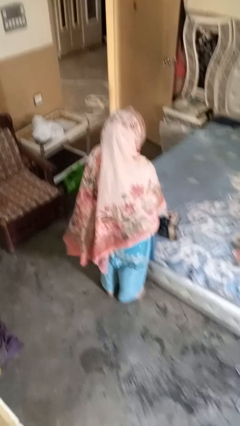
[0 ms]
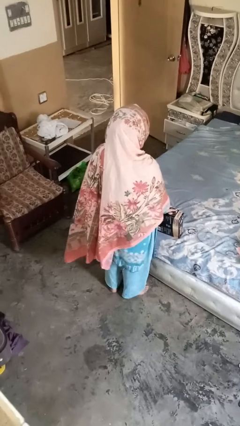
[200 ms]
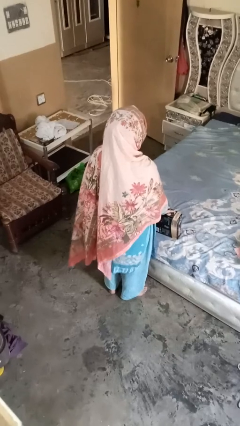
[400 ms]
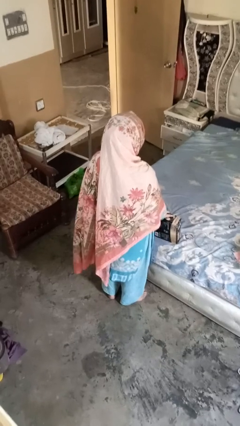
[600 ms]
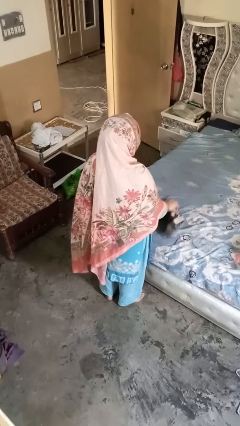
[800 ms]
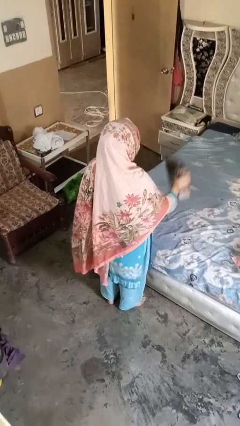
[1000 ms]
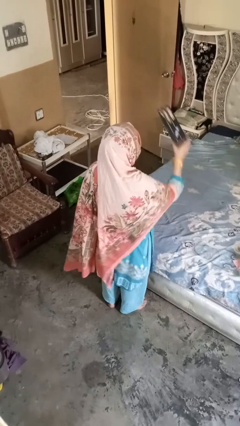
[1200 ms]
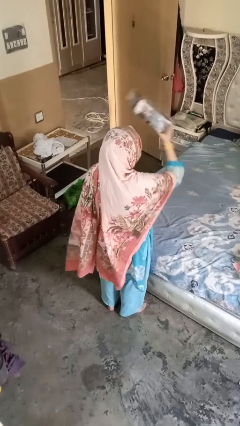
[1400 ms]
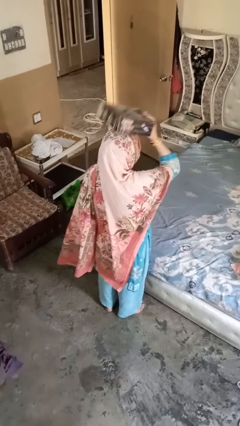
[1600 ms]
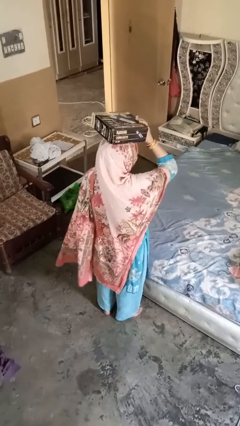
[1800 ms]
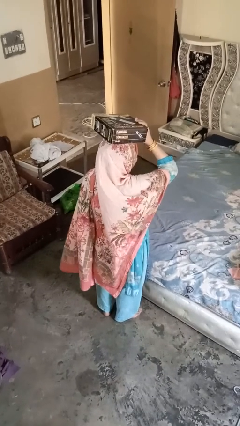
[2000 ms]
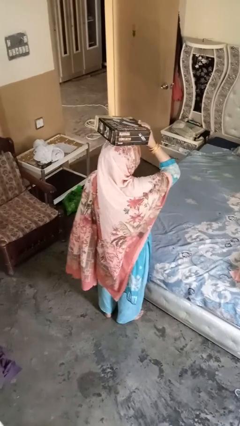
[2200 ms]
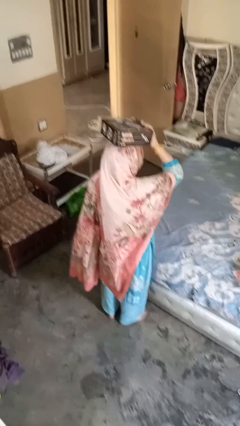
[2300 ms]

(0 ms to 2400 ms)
person holds object above head

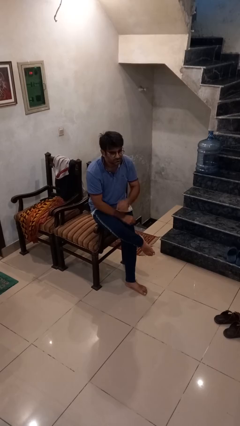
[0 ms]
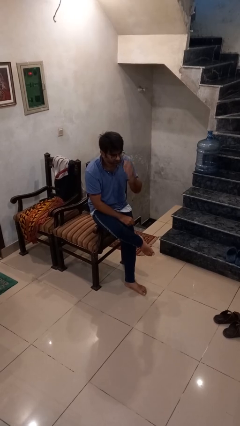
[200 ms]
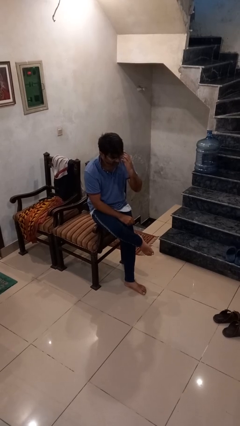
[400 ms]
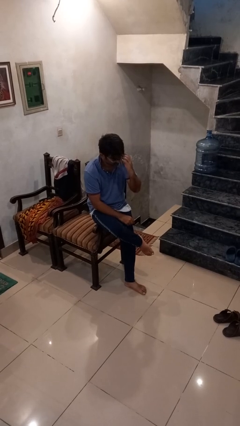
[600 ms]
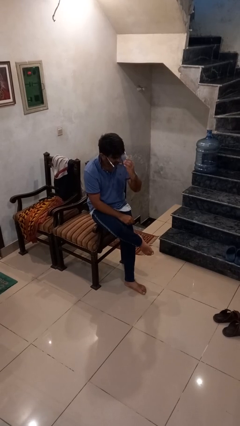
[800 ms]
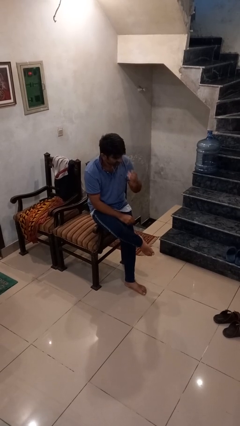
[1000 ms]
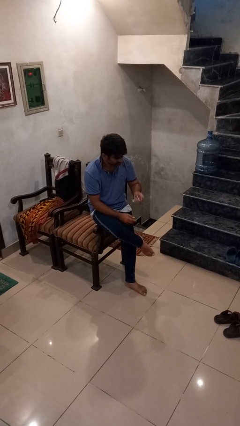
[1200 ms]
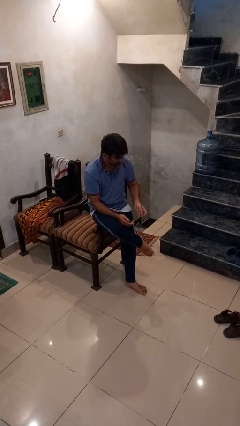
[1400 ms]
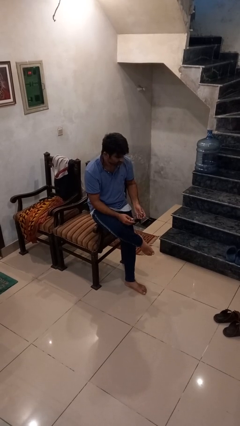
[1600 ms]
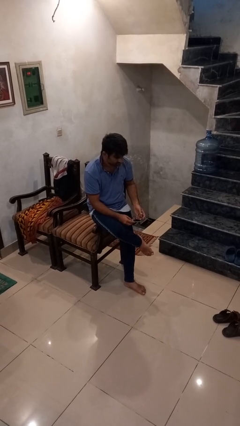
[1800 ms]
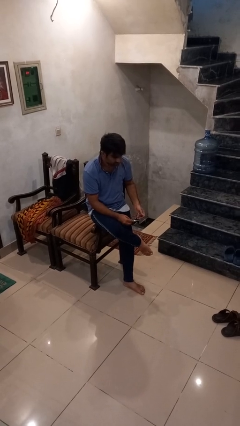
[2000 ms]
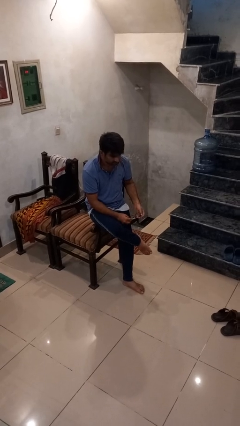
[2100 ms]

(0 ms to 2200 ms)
person takes off glasses

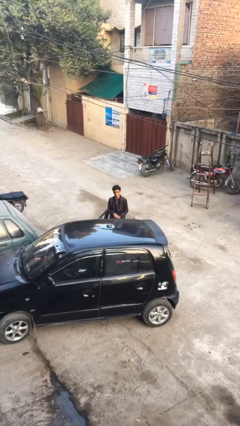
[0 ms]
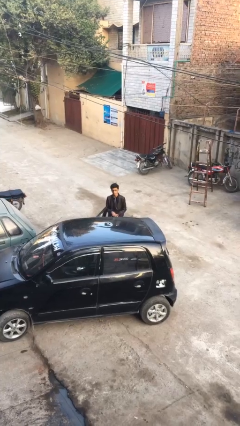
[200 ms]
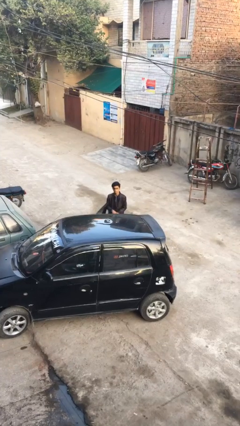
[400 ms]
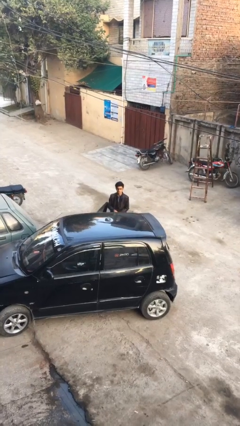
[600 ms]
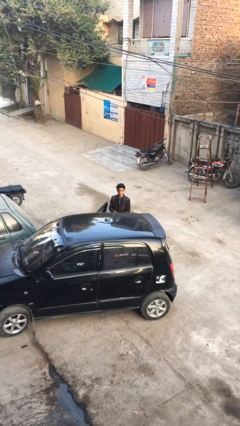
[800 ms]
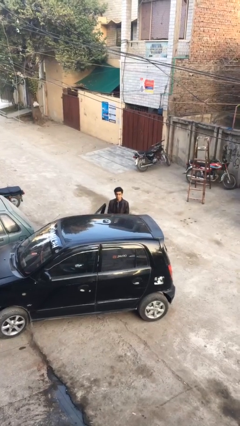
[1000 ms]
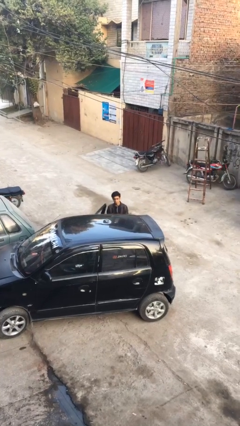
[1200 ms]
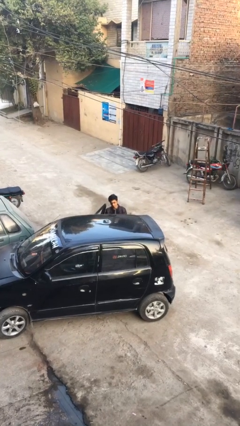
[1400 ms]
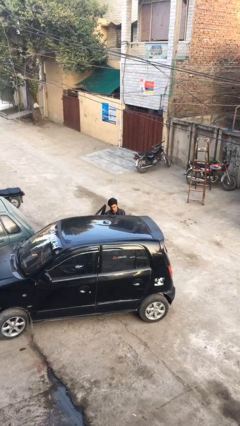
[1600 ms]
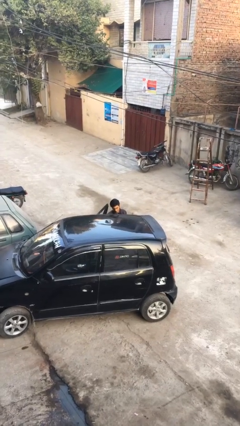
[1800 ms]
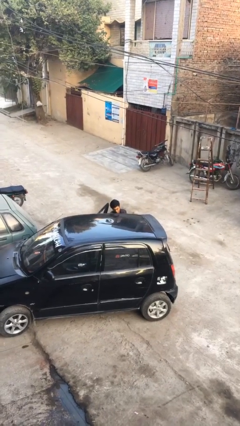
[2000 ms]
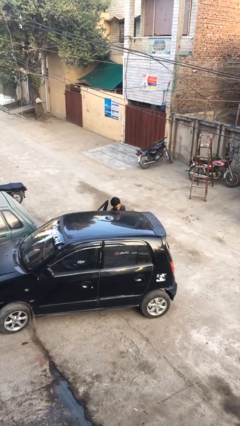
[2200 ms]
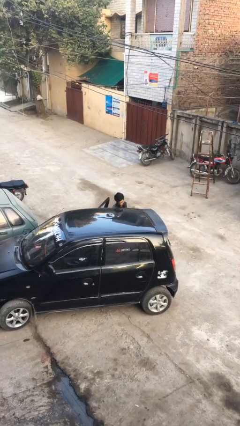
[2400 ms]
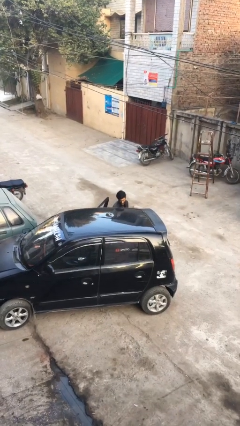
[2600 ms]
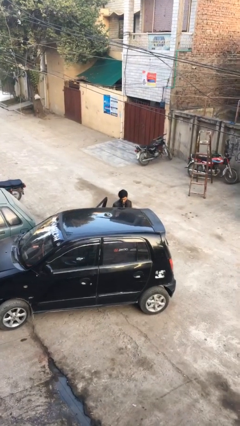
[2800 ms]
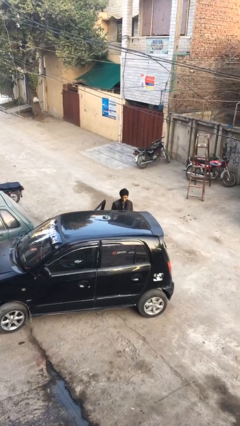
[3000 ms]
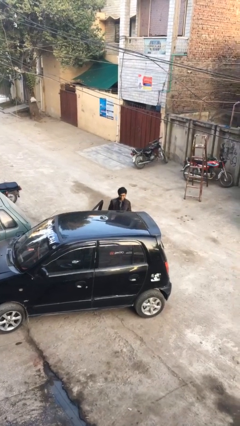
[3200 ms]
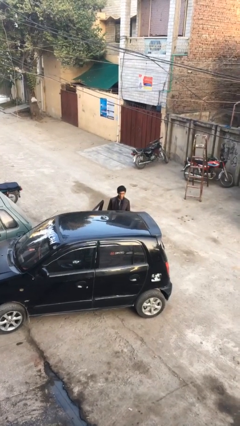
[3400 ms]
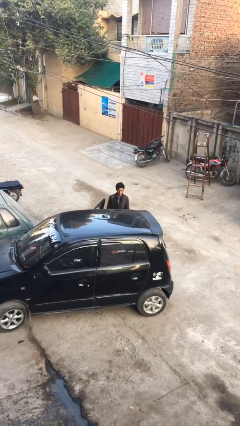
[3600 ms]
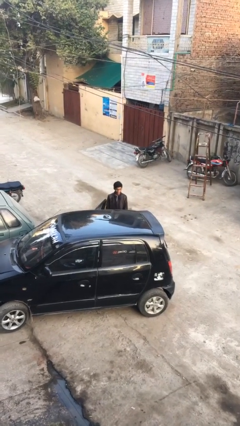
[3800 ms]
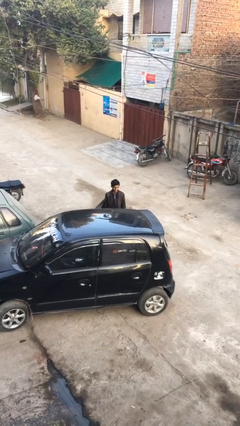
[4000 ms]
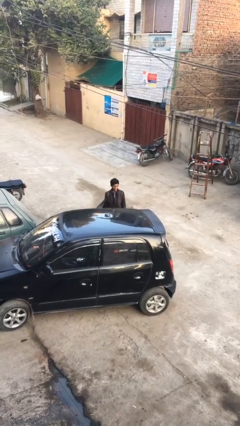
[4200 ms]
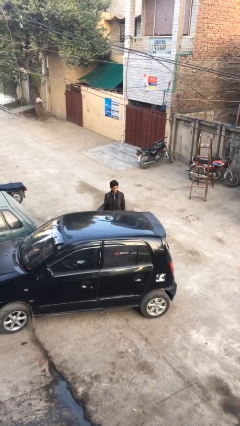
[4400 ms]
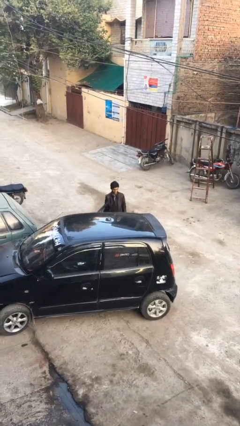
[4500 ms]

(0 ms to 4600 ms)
person loads car

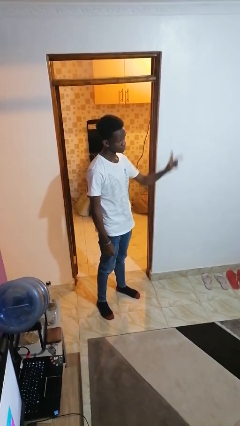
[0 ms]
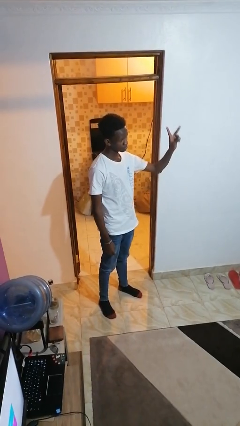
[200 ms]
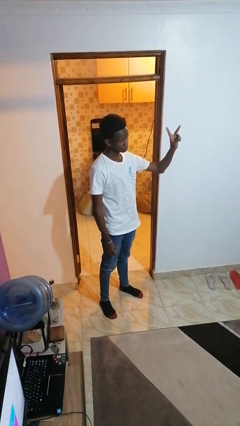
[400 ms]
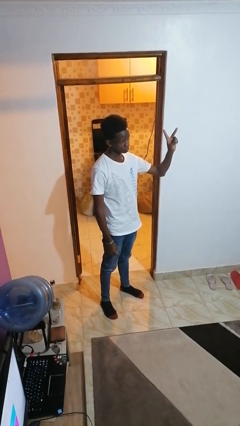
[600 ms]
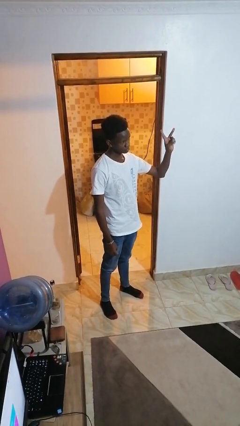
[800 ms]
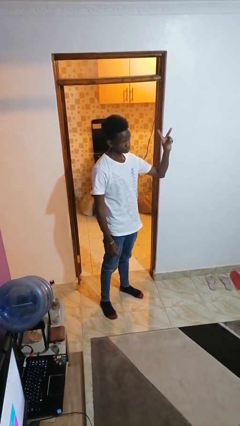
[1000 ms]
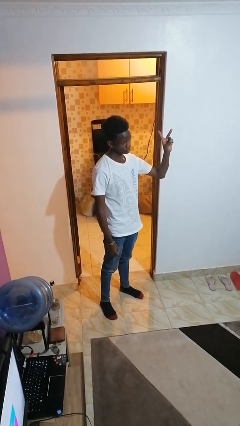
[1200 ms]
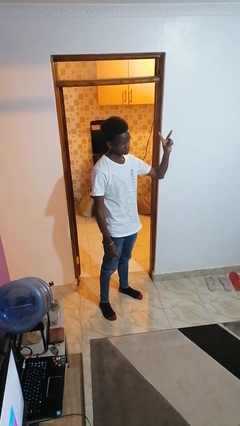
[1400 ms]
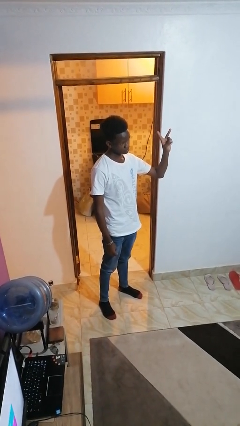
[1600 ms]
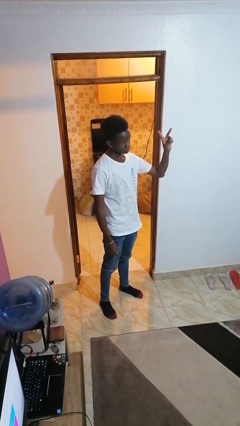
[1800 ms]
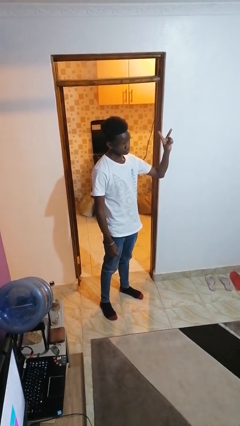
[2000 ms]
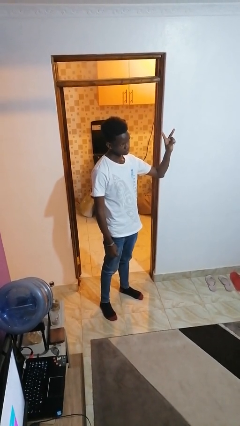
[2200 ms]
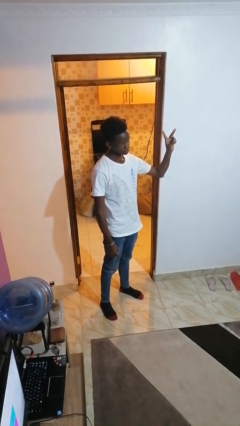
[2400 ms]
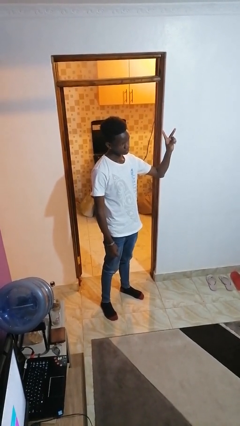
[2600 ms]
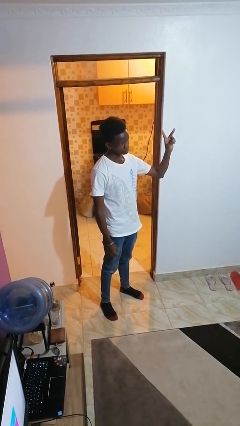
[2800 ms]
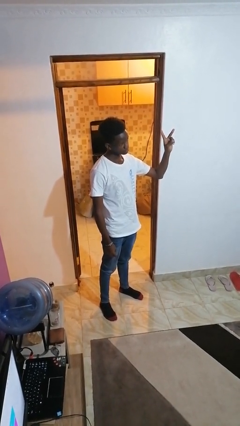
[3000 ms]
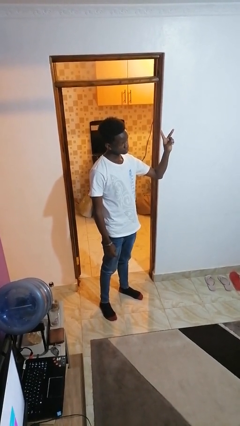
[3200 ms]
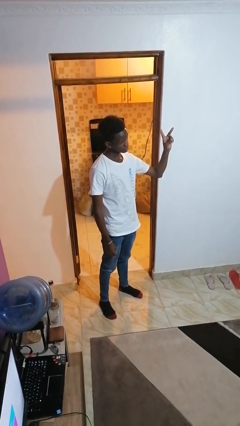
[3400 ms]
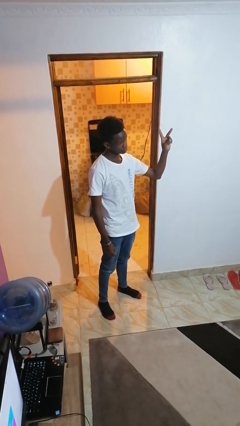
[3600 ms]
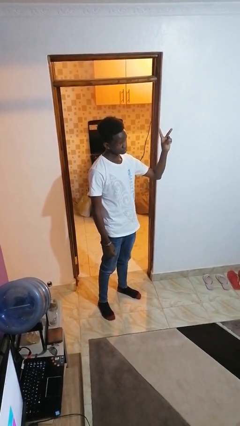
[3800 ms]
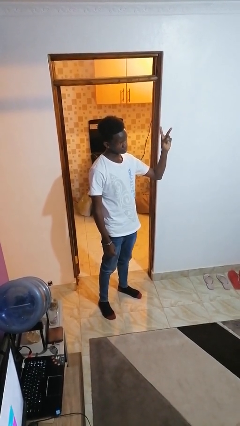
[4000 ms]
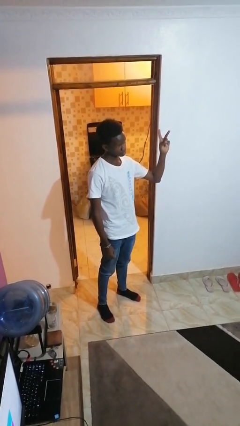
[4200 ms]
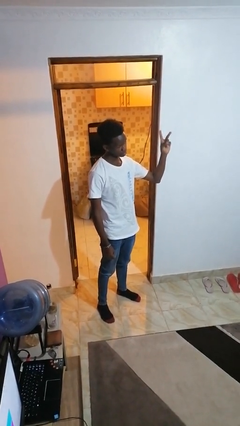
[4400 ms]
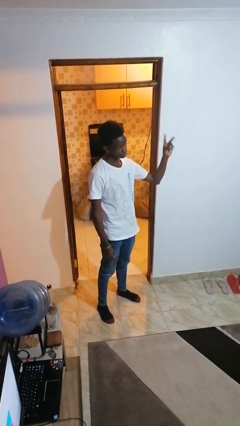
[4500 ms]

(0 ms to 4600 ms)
person gestures peace

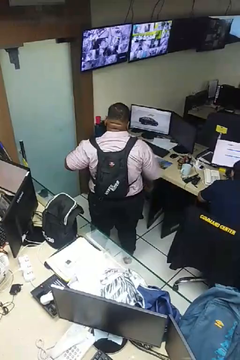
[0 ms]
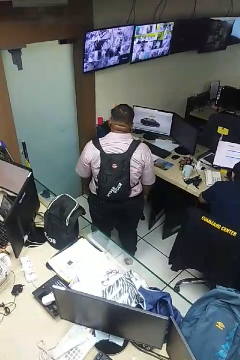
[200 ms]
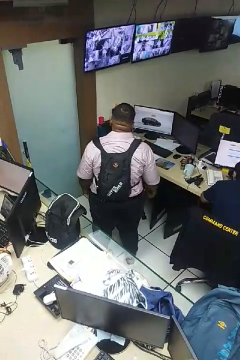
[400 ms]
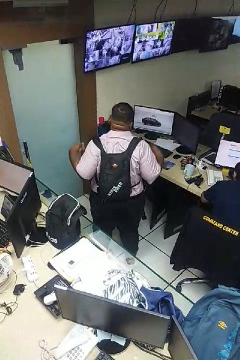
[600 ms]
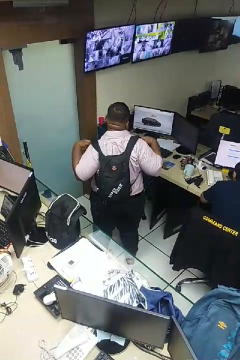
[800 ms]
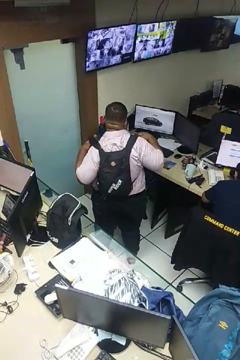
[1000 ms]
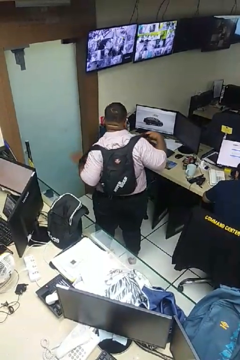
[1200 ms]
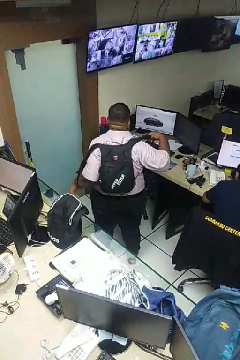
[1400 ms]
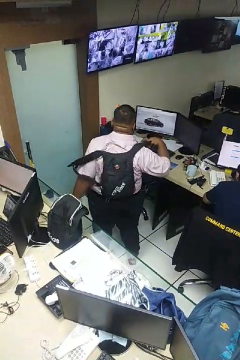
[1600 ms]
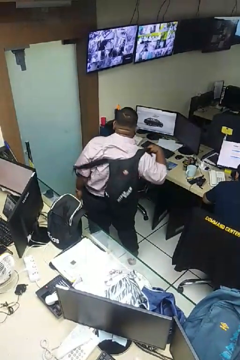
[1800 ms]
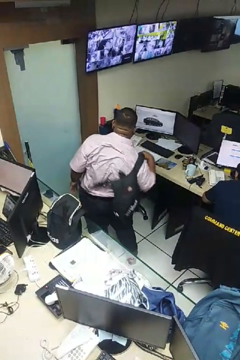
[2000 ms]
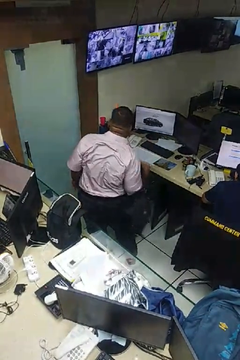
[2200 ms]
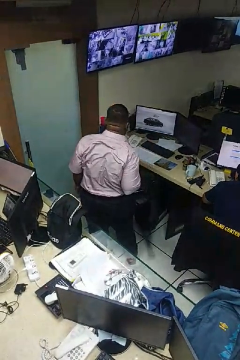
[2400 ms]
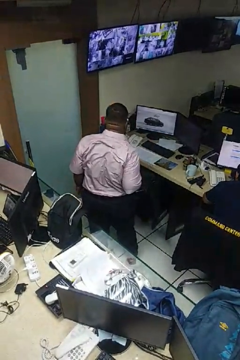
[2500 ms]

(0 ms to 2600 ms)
person takes off backpack

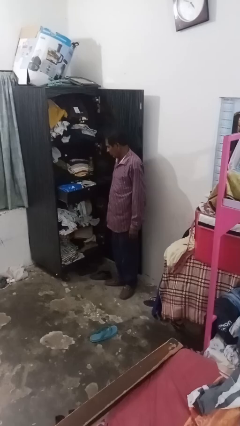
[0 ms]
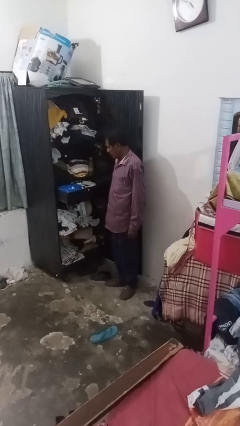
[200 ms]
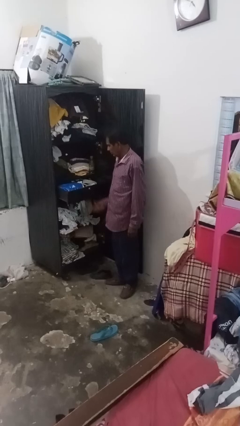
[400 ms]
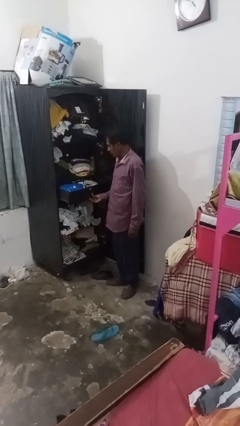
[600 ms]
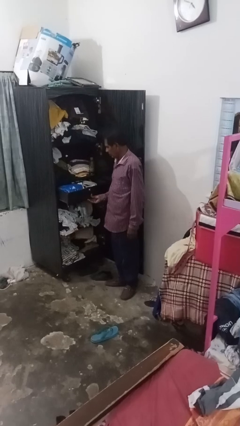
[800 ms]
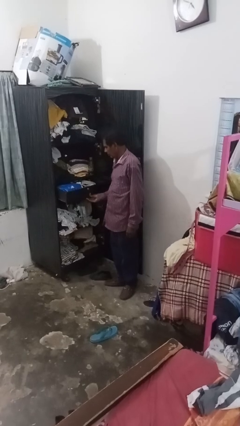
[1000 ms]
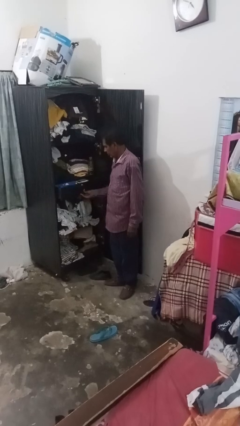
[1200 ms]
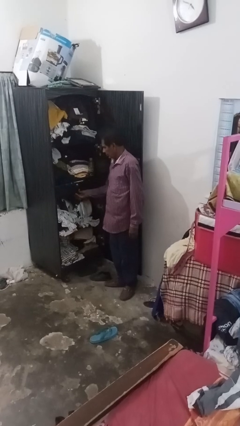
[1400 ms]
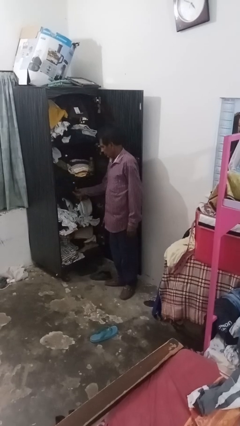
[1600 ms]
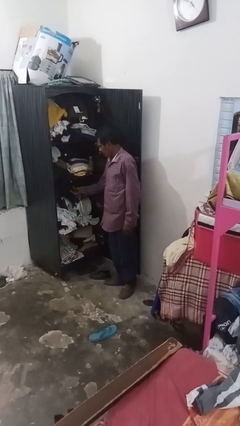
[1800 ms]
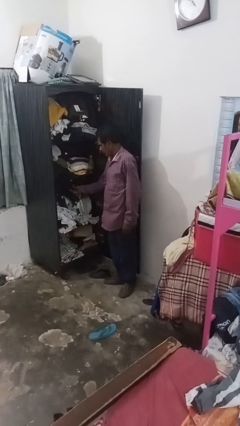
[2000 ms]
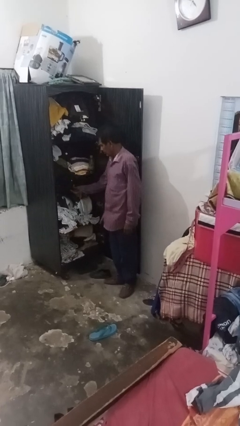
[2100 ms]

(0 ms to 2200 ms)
person closes dresser drawer
